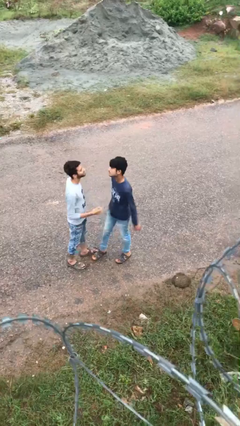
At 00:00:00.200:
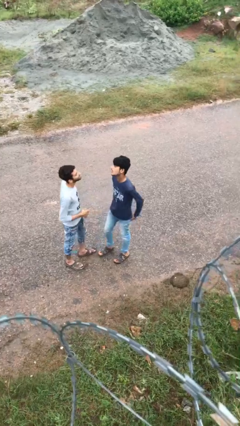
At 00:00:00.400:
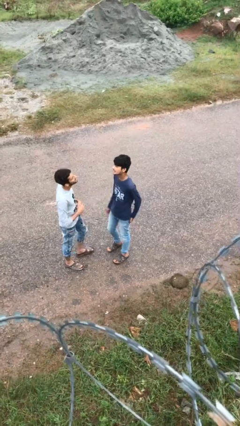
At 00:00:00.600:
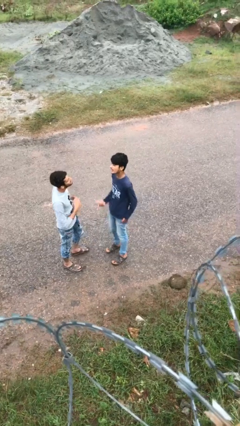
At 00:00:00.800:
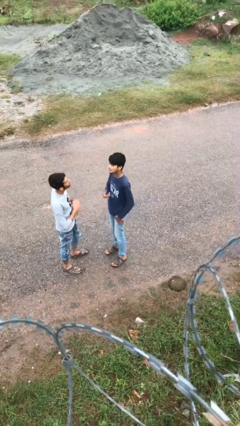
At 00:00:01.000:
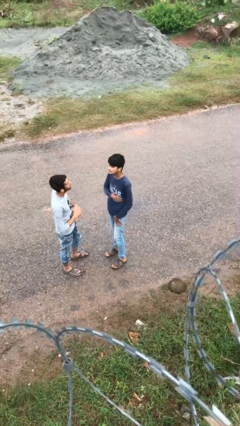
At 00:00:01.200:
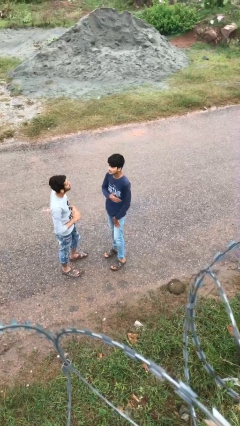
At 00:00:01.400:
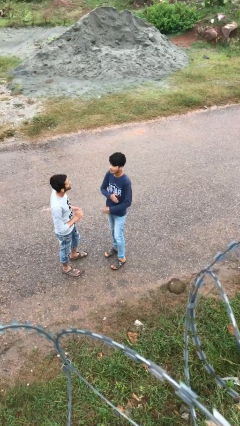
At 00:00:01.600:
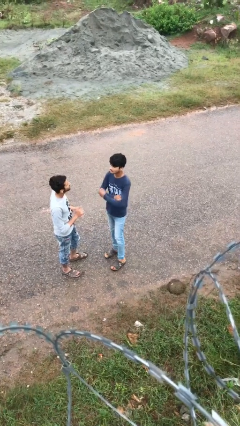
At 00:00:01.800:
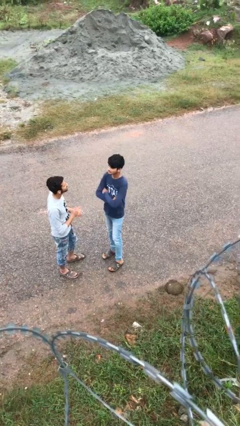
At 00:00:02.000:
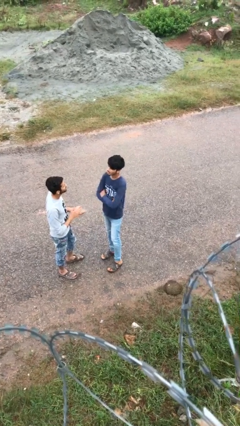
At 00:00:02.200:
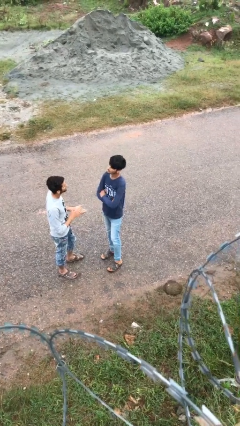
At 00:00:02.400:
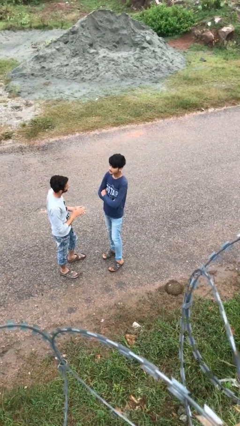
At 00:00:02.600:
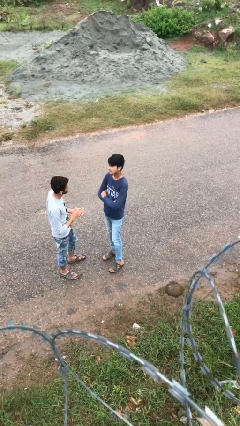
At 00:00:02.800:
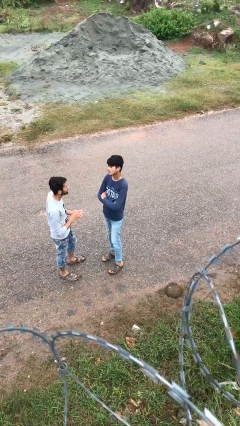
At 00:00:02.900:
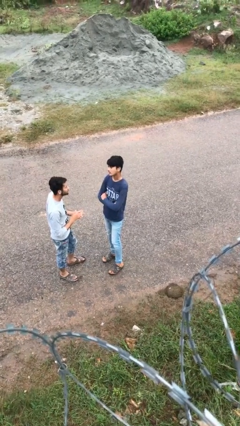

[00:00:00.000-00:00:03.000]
person talks to person

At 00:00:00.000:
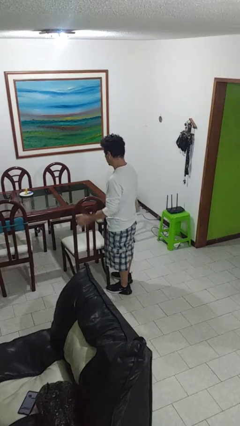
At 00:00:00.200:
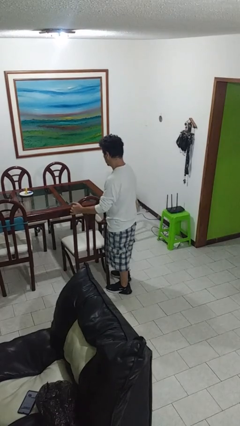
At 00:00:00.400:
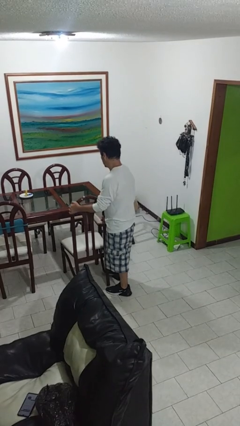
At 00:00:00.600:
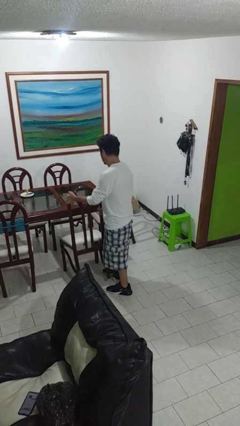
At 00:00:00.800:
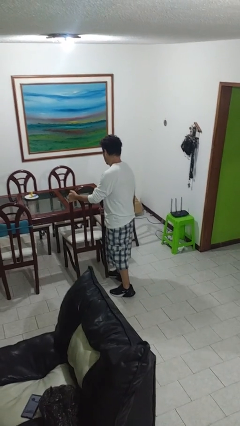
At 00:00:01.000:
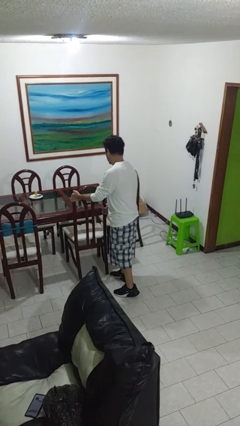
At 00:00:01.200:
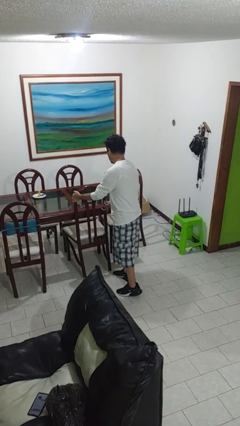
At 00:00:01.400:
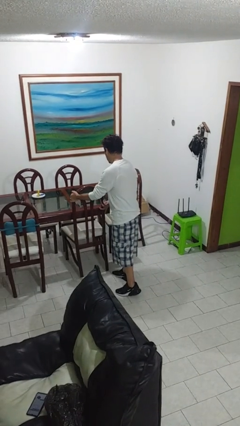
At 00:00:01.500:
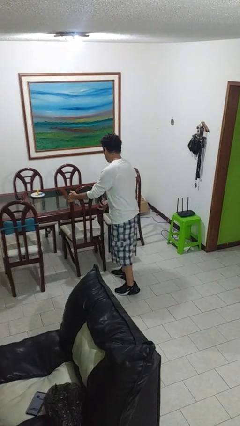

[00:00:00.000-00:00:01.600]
person pushes in chair

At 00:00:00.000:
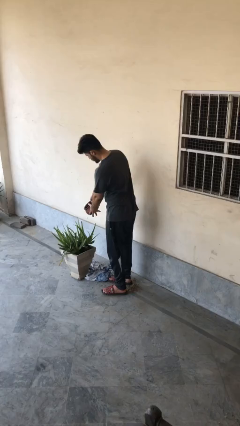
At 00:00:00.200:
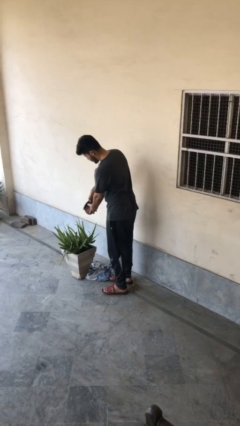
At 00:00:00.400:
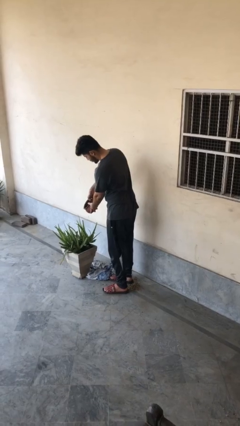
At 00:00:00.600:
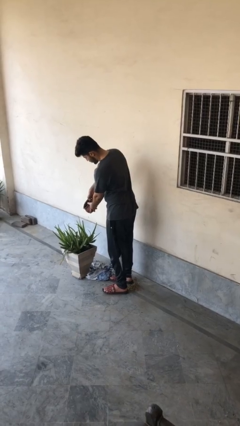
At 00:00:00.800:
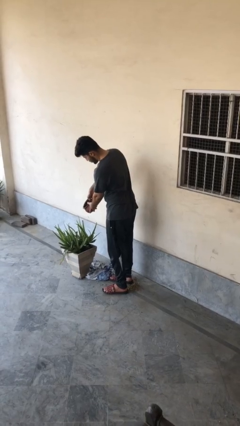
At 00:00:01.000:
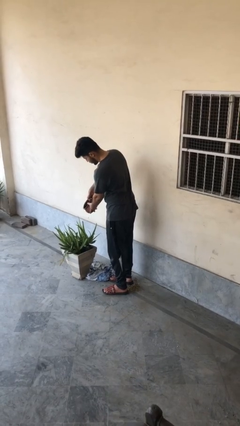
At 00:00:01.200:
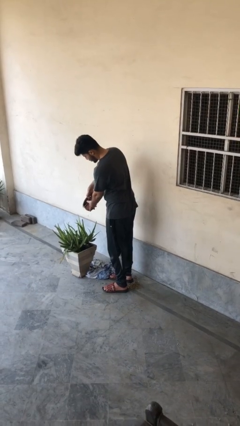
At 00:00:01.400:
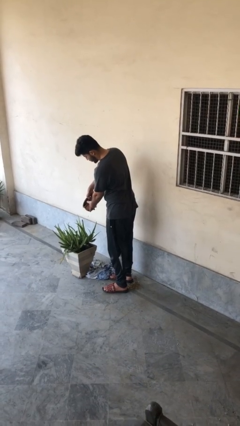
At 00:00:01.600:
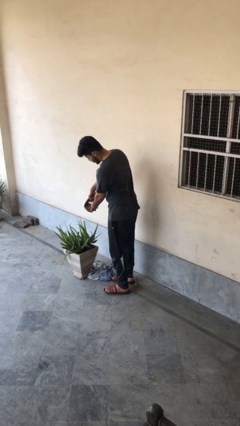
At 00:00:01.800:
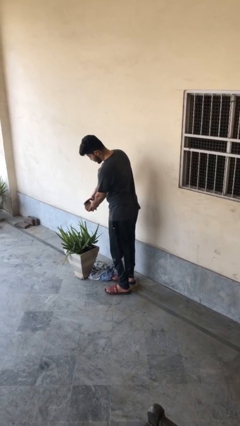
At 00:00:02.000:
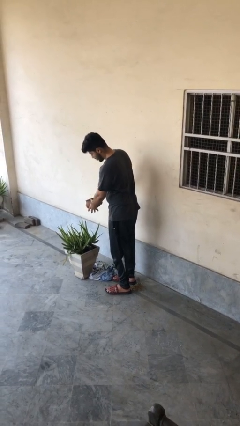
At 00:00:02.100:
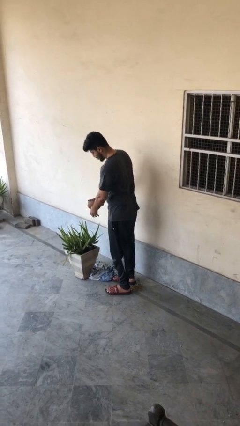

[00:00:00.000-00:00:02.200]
person waters houseplant

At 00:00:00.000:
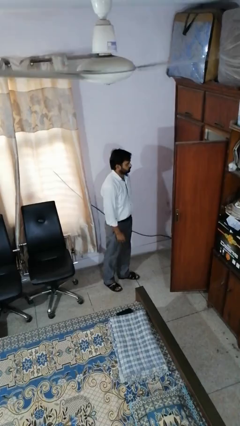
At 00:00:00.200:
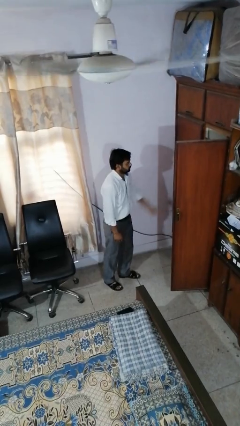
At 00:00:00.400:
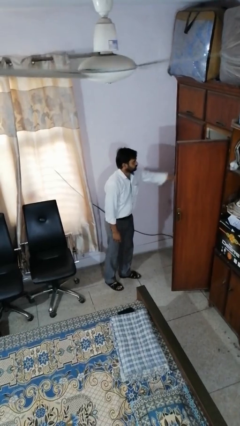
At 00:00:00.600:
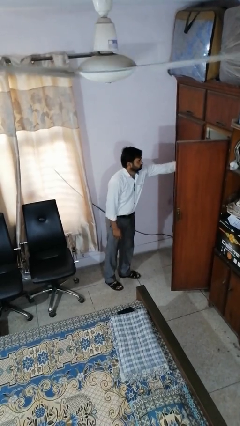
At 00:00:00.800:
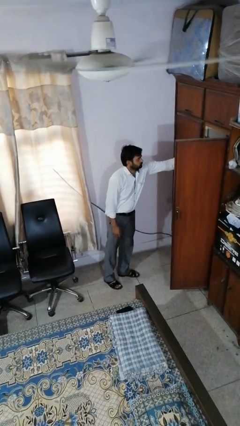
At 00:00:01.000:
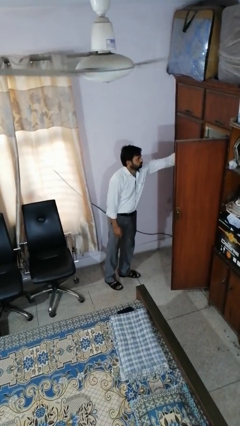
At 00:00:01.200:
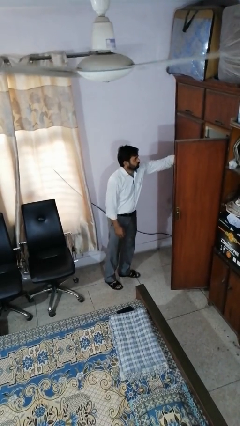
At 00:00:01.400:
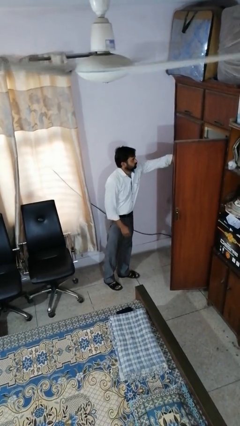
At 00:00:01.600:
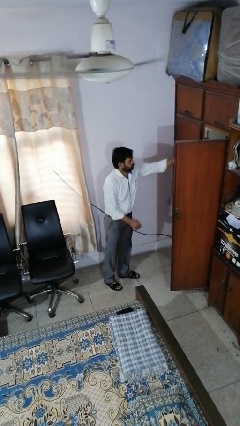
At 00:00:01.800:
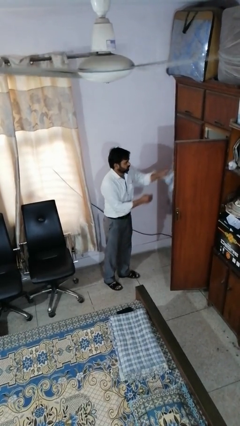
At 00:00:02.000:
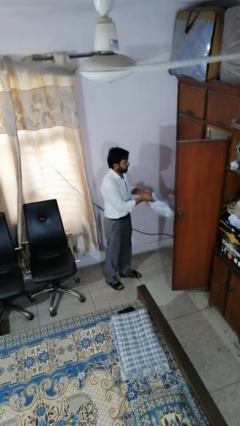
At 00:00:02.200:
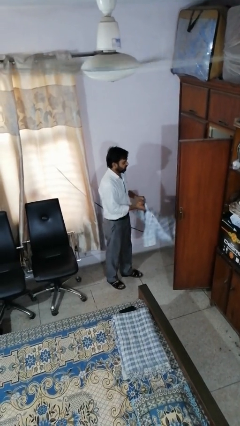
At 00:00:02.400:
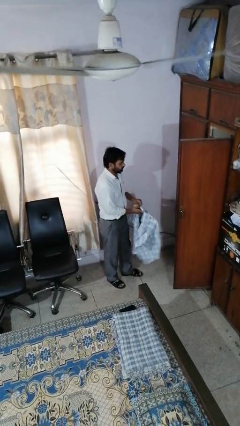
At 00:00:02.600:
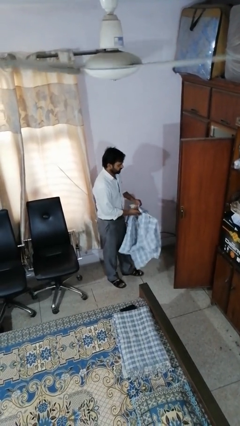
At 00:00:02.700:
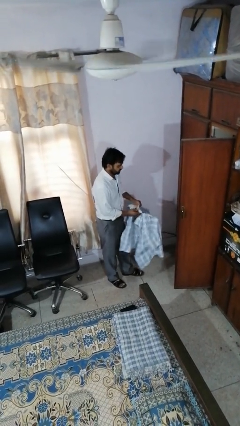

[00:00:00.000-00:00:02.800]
person takes clothes from closet

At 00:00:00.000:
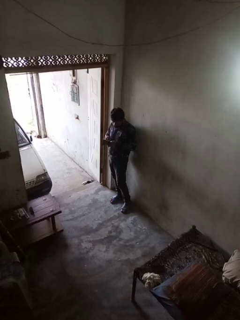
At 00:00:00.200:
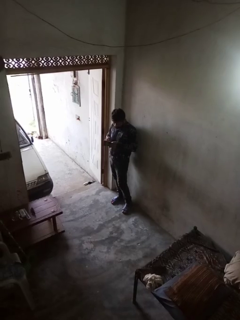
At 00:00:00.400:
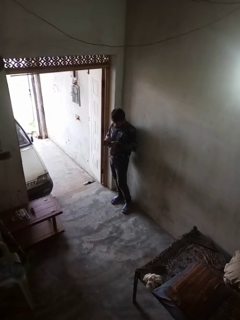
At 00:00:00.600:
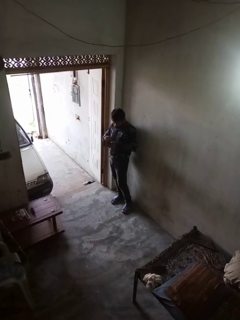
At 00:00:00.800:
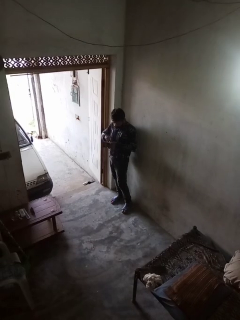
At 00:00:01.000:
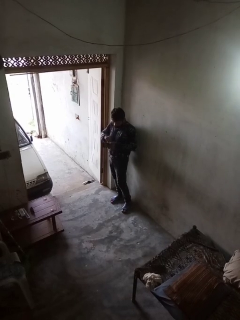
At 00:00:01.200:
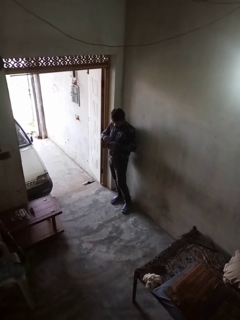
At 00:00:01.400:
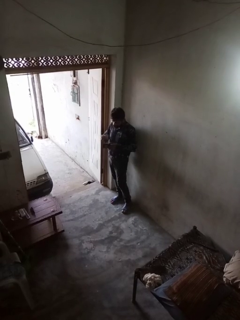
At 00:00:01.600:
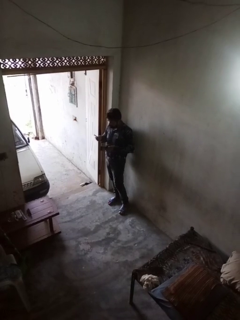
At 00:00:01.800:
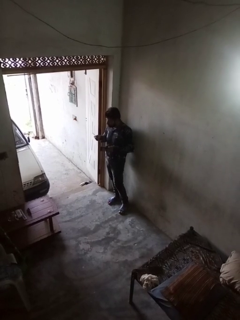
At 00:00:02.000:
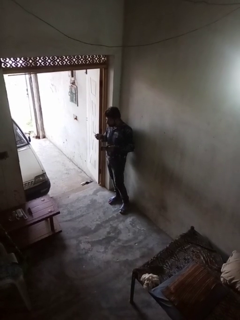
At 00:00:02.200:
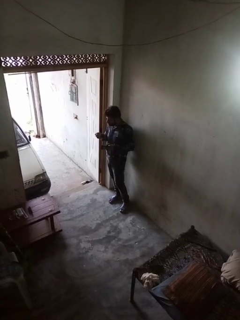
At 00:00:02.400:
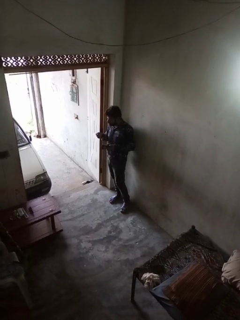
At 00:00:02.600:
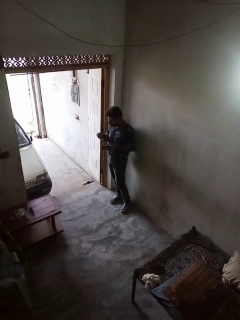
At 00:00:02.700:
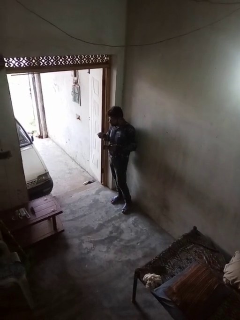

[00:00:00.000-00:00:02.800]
person takes object from purse

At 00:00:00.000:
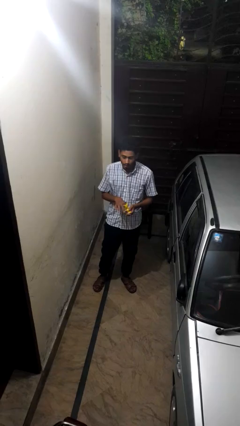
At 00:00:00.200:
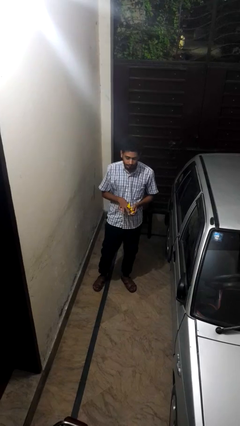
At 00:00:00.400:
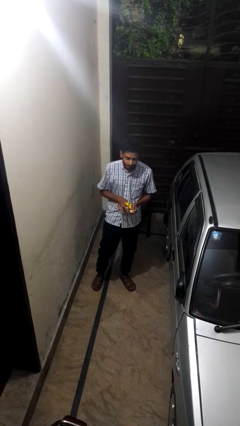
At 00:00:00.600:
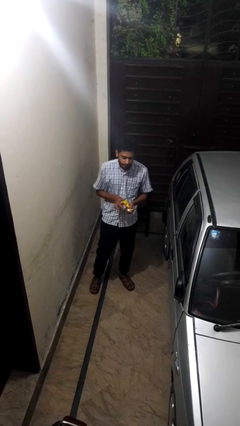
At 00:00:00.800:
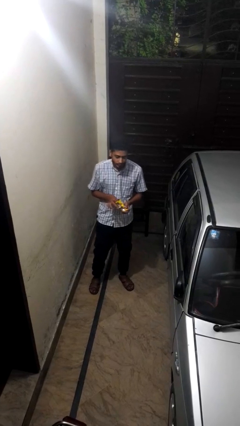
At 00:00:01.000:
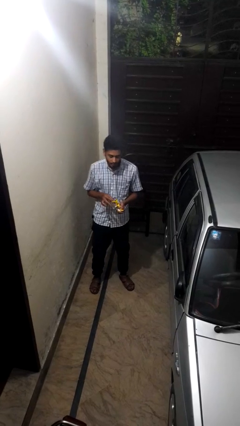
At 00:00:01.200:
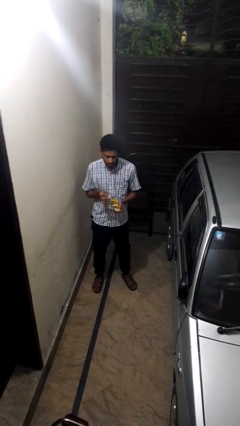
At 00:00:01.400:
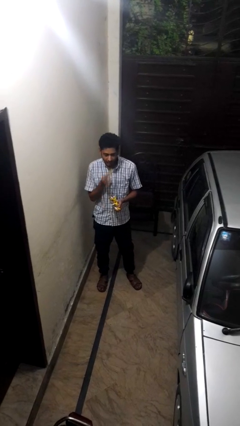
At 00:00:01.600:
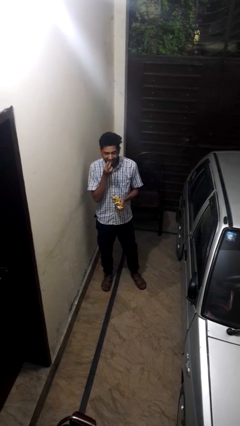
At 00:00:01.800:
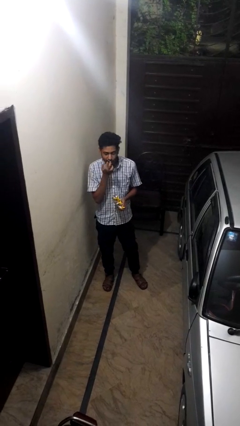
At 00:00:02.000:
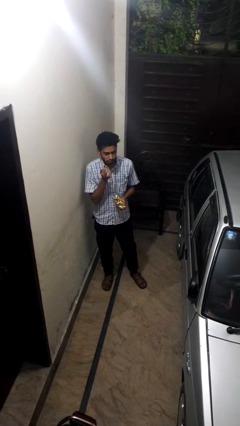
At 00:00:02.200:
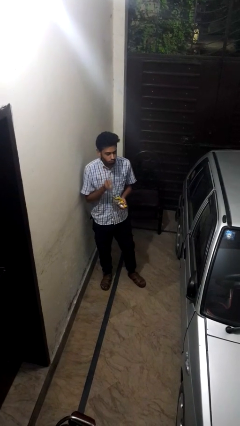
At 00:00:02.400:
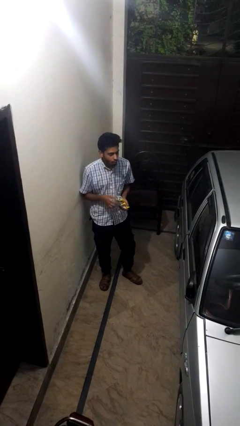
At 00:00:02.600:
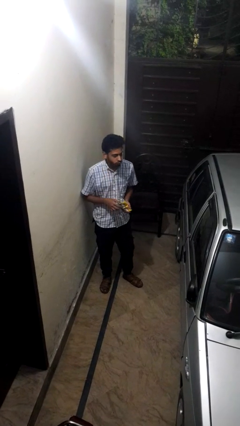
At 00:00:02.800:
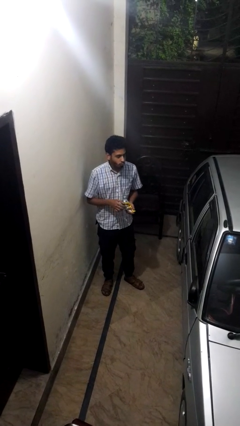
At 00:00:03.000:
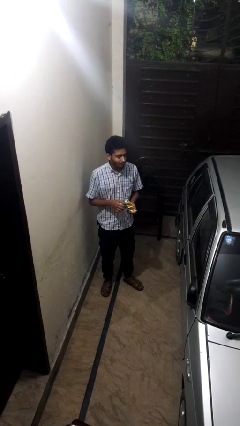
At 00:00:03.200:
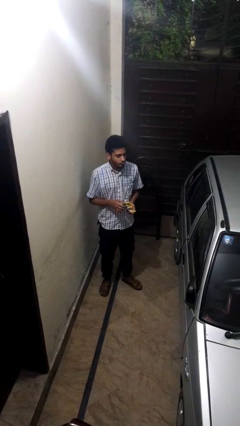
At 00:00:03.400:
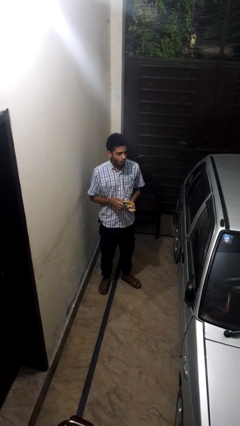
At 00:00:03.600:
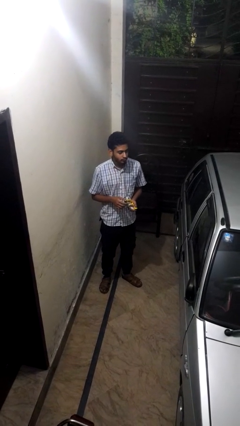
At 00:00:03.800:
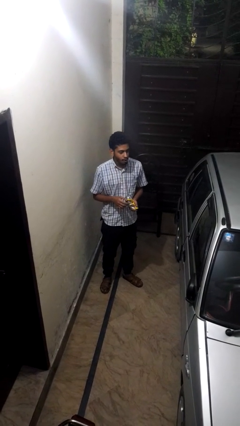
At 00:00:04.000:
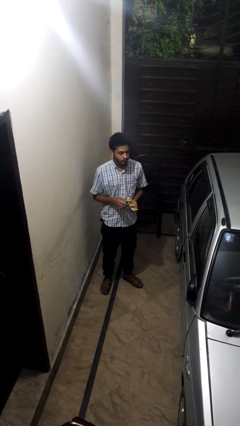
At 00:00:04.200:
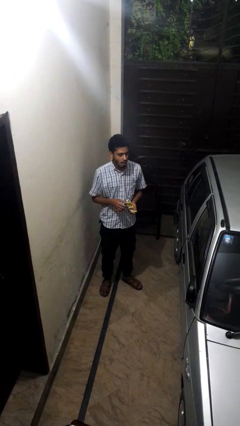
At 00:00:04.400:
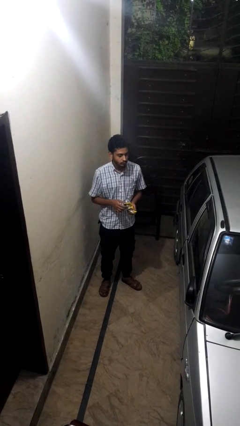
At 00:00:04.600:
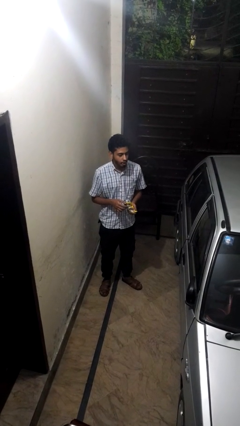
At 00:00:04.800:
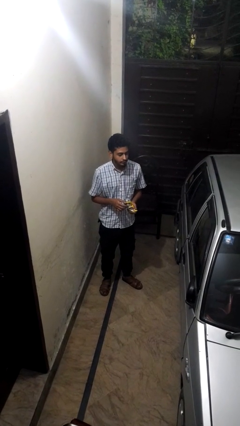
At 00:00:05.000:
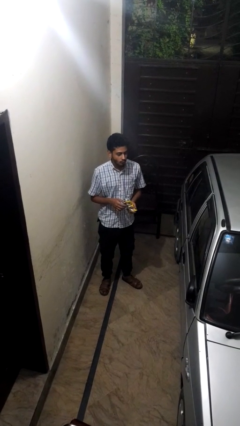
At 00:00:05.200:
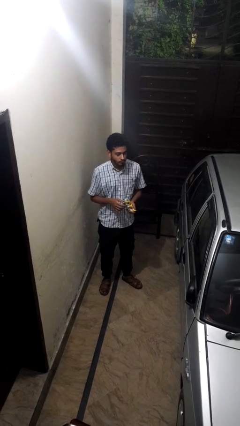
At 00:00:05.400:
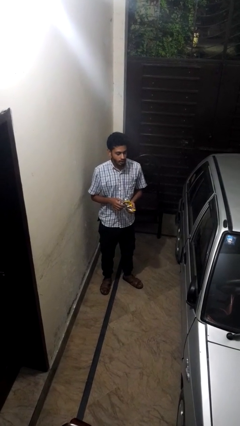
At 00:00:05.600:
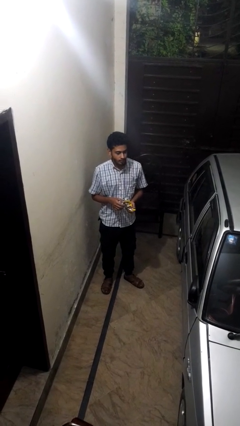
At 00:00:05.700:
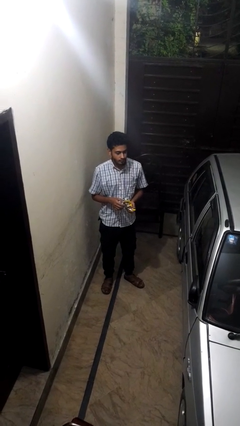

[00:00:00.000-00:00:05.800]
person eats snack from bag
